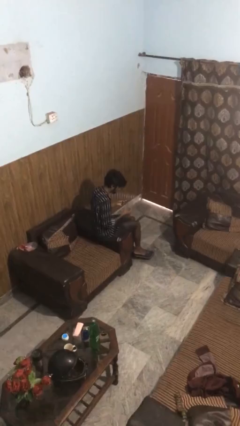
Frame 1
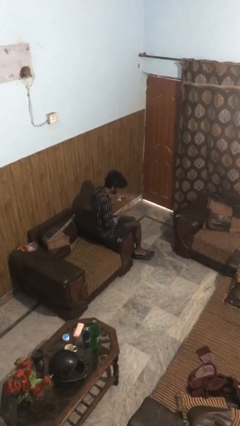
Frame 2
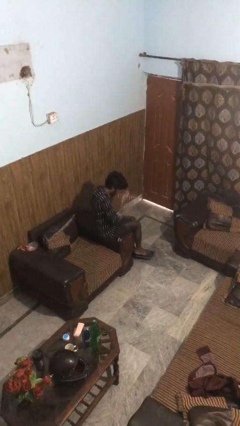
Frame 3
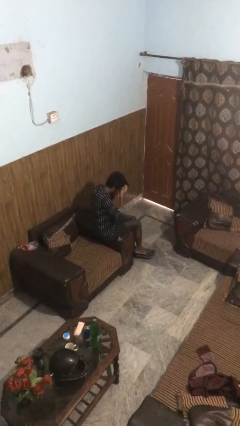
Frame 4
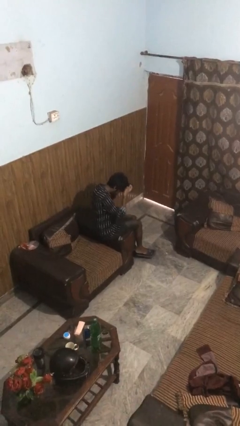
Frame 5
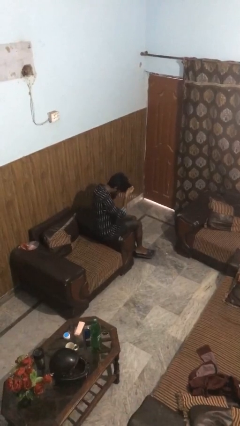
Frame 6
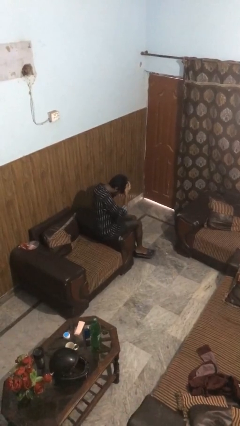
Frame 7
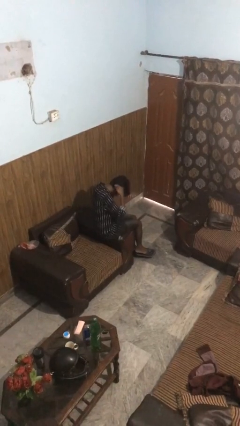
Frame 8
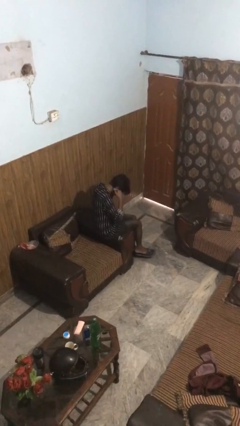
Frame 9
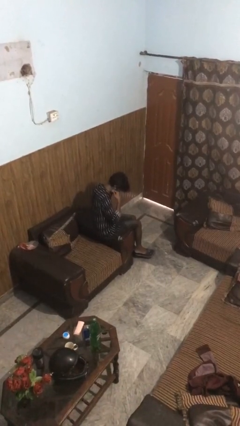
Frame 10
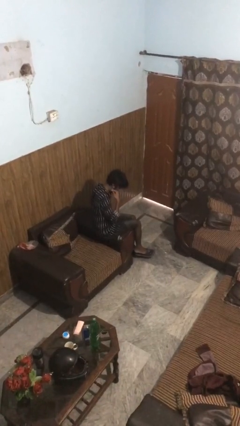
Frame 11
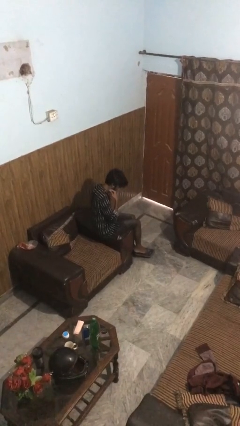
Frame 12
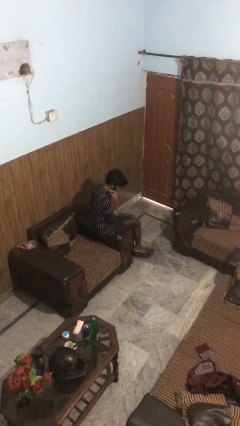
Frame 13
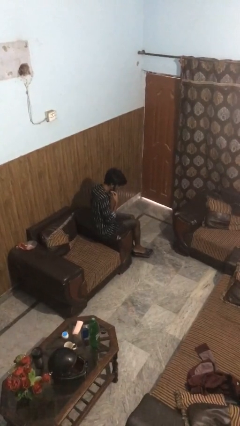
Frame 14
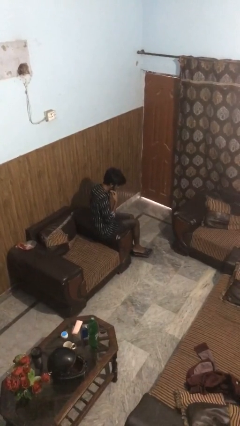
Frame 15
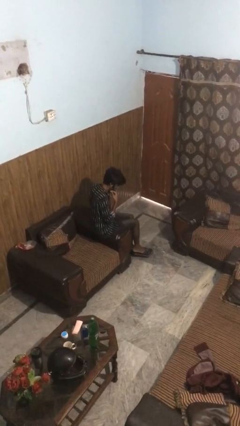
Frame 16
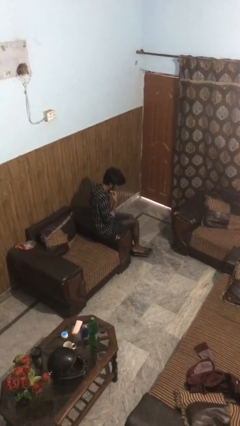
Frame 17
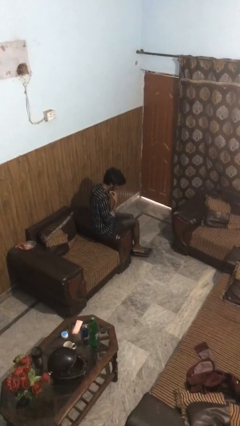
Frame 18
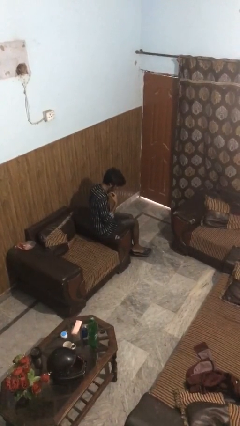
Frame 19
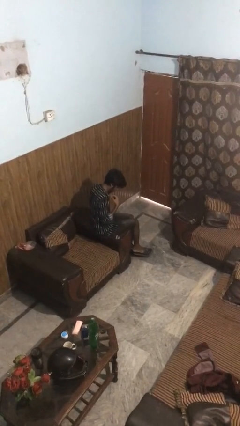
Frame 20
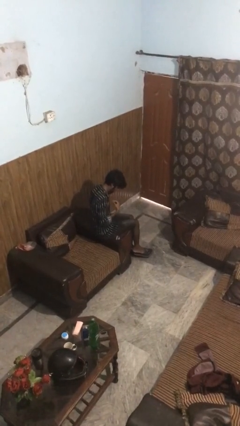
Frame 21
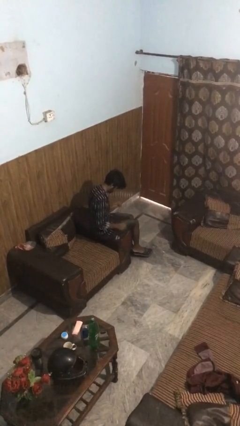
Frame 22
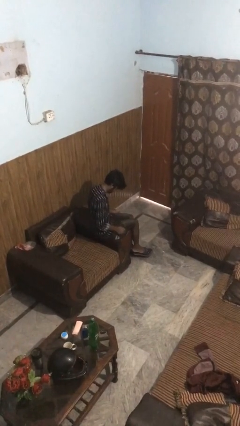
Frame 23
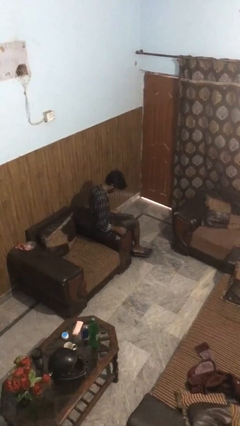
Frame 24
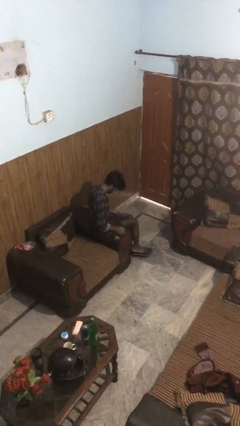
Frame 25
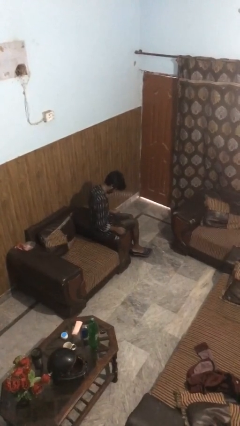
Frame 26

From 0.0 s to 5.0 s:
person puts on necklace

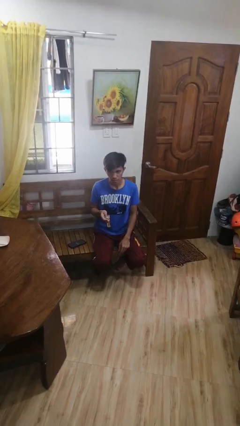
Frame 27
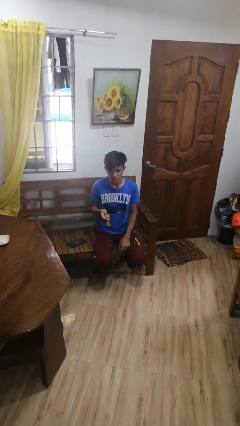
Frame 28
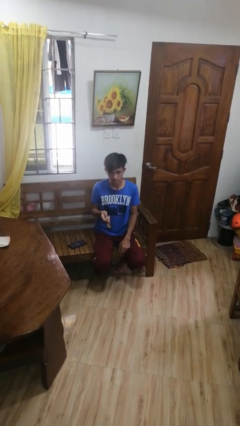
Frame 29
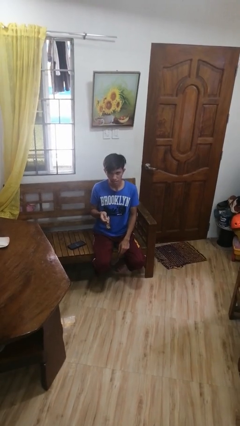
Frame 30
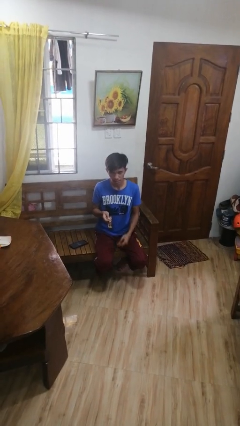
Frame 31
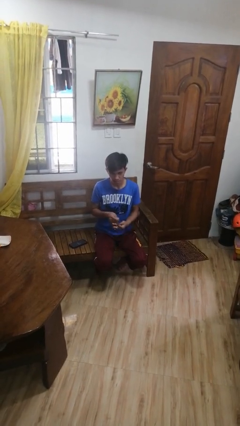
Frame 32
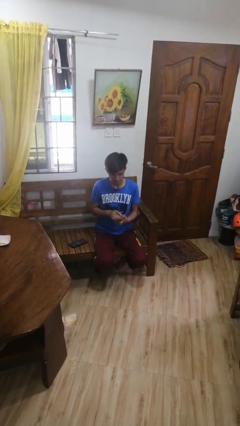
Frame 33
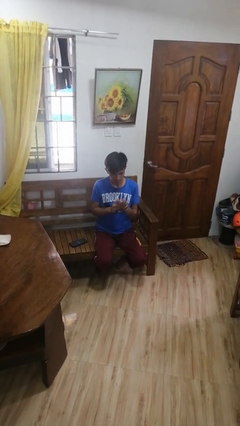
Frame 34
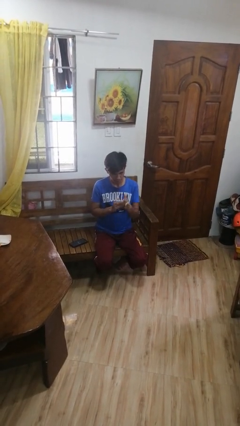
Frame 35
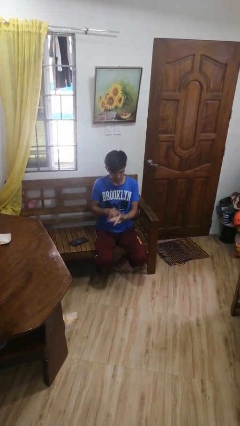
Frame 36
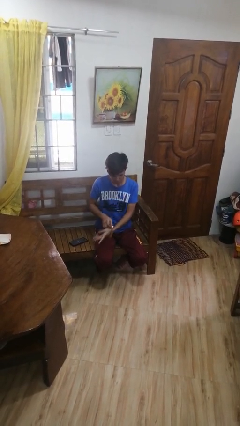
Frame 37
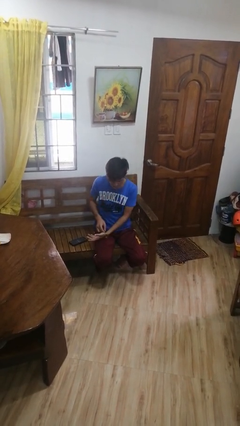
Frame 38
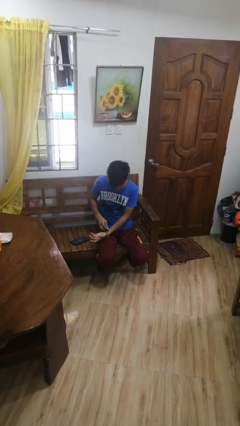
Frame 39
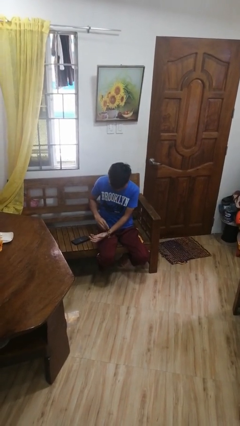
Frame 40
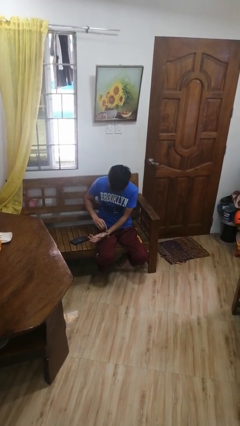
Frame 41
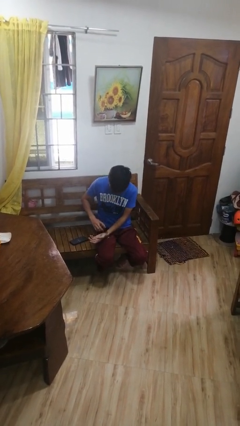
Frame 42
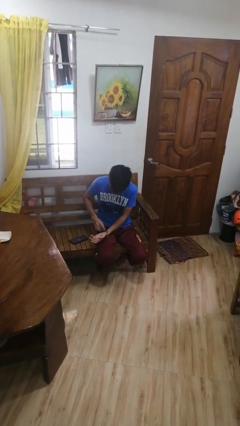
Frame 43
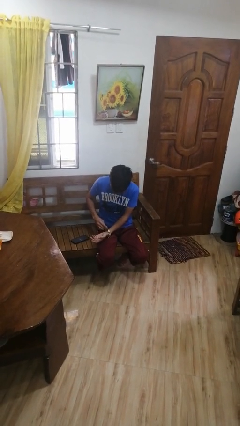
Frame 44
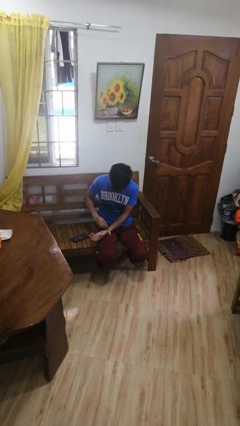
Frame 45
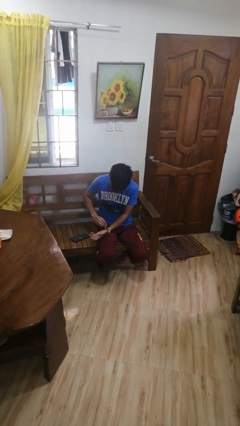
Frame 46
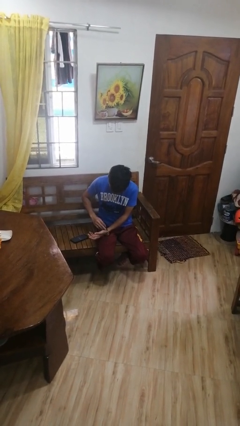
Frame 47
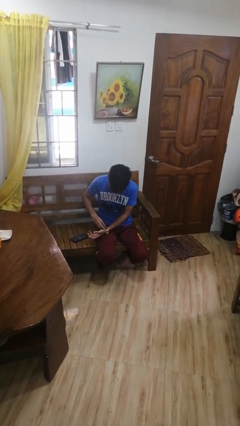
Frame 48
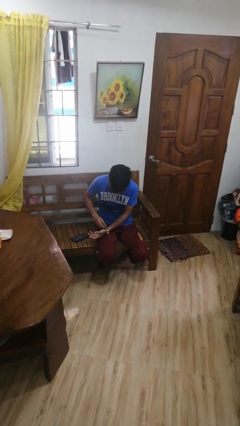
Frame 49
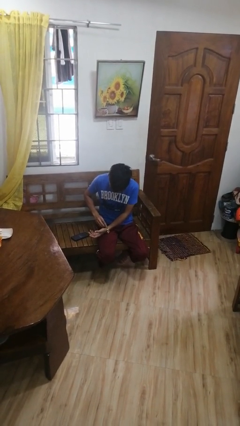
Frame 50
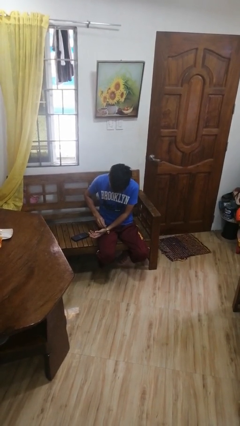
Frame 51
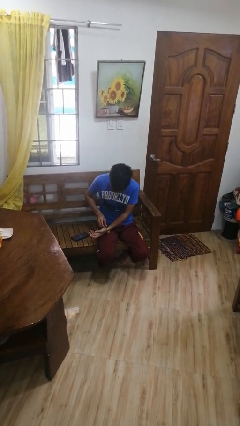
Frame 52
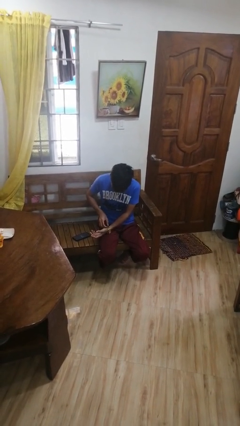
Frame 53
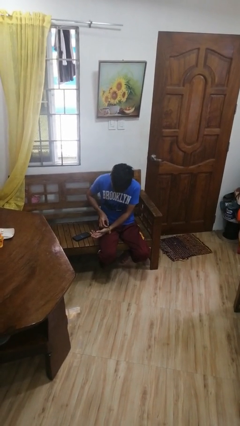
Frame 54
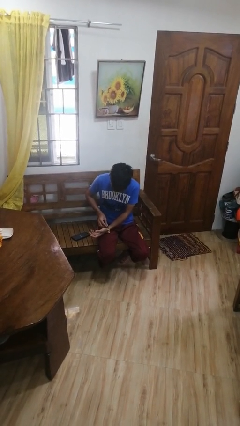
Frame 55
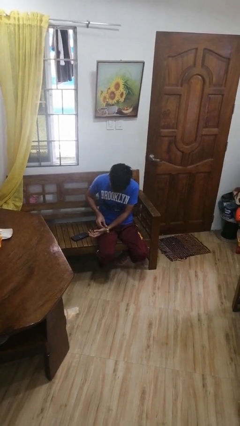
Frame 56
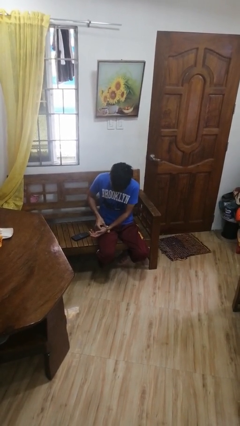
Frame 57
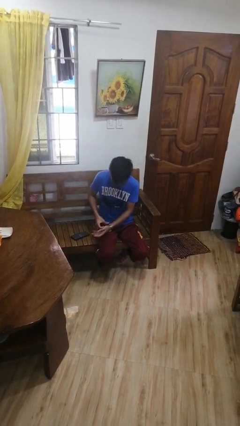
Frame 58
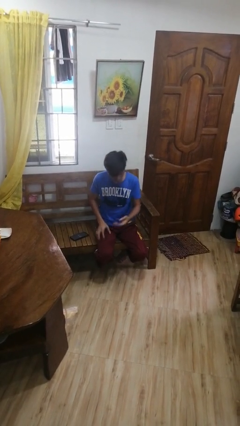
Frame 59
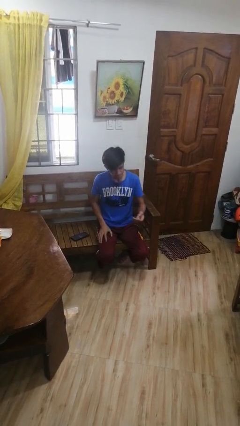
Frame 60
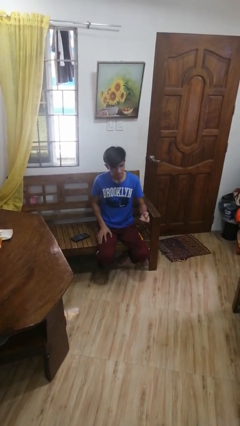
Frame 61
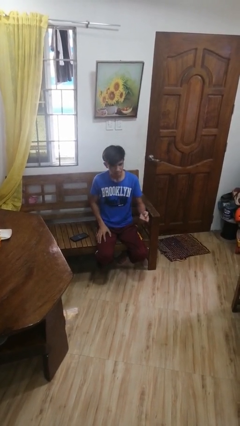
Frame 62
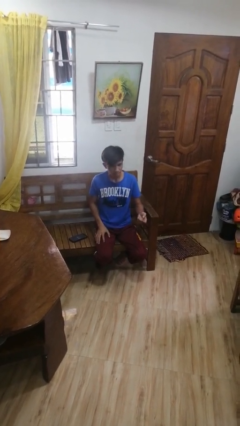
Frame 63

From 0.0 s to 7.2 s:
person puts on wristwatch

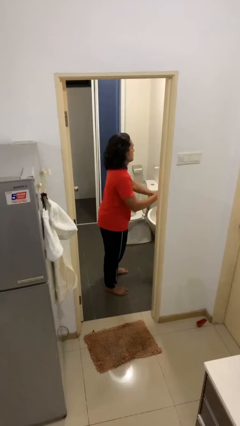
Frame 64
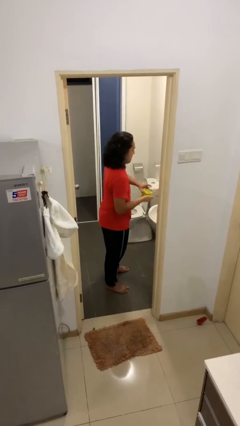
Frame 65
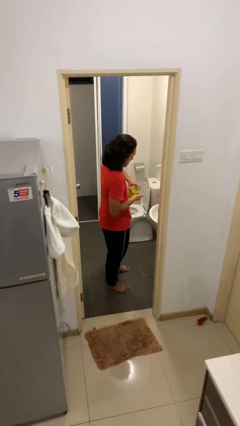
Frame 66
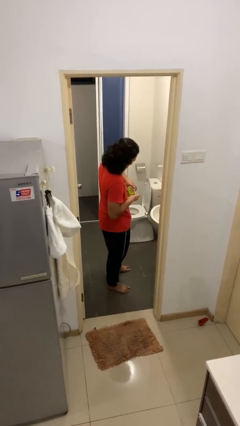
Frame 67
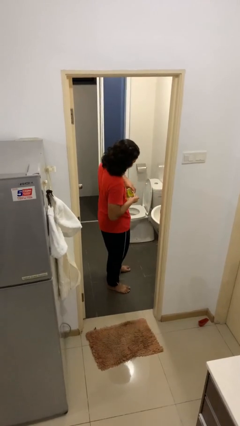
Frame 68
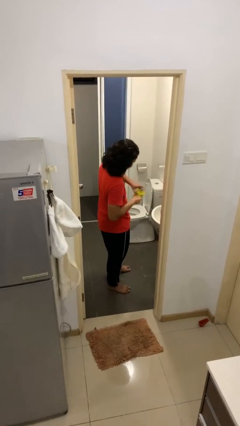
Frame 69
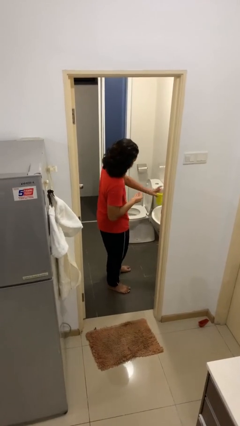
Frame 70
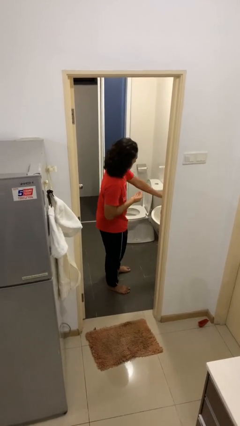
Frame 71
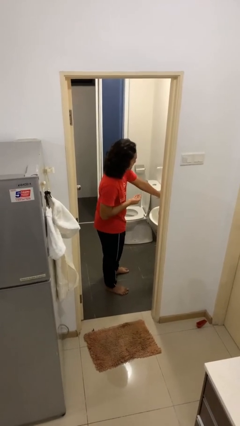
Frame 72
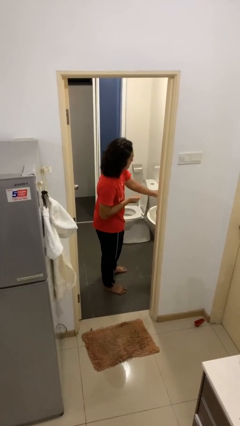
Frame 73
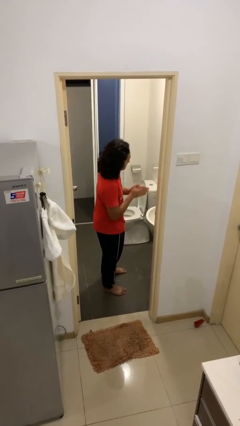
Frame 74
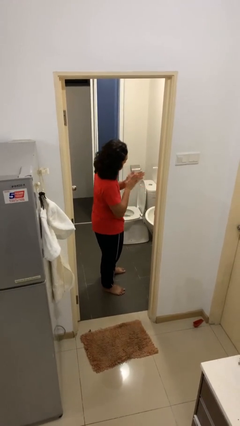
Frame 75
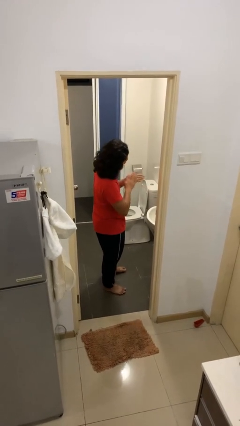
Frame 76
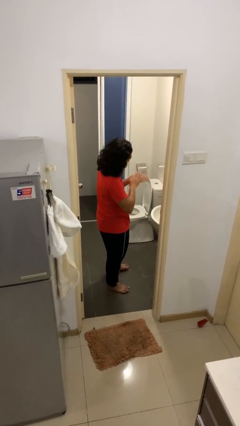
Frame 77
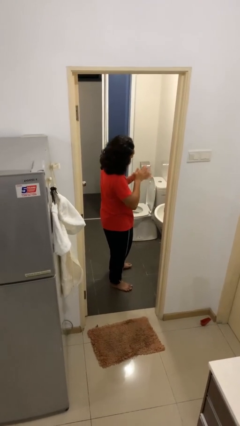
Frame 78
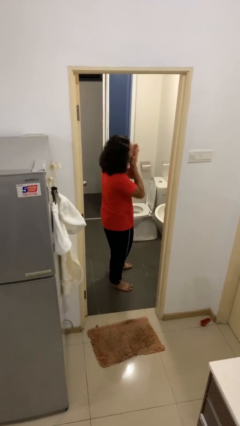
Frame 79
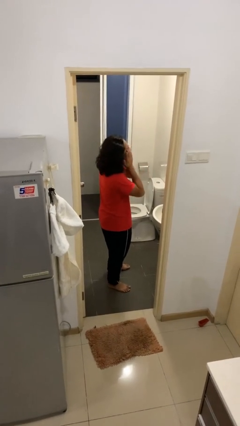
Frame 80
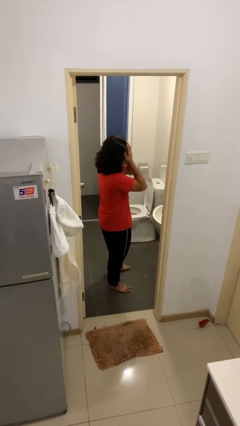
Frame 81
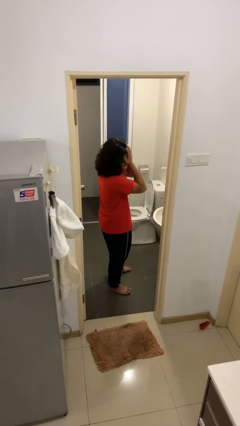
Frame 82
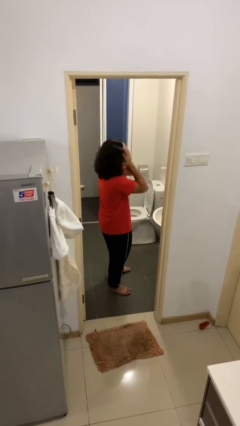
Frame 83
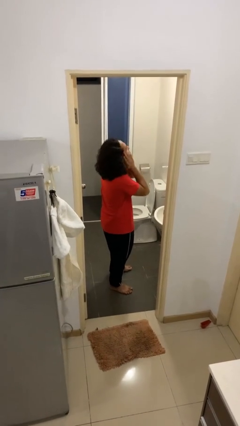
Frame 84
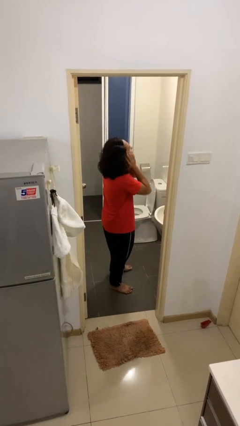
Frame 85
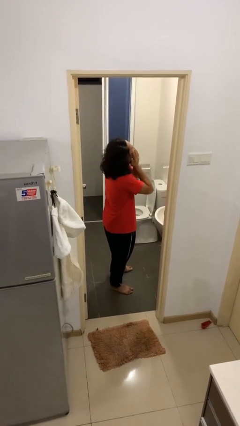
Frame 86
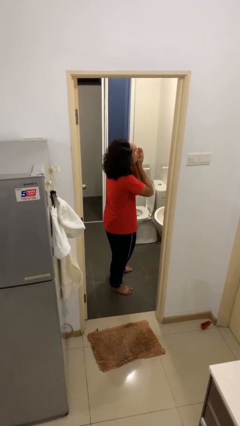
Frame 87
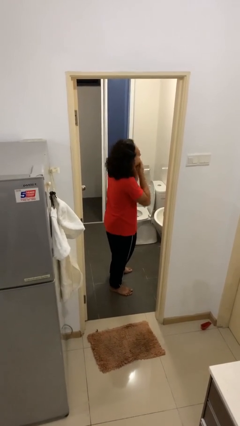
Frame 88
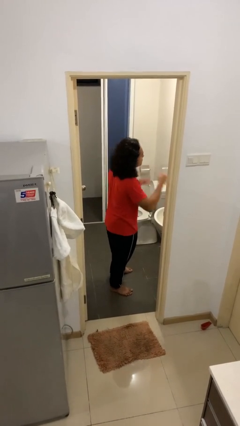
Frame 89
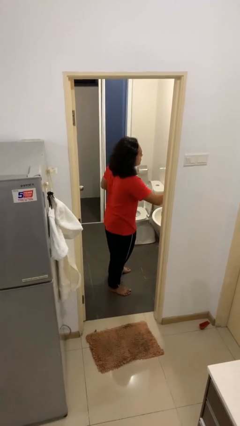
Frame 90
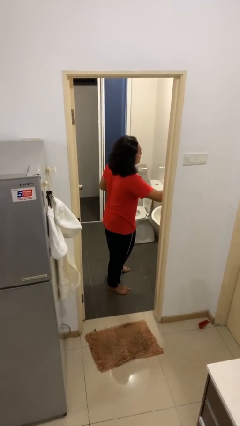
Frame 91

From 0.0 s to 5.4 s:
person applies shaving cream

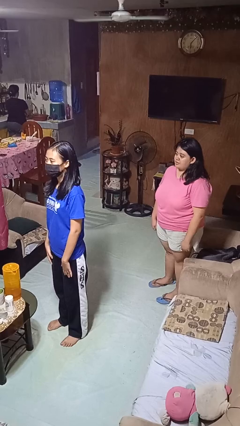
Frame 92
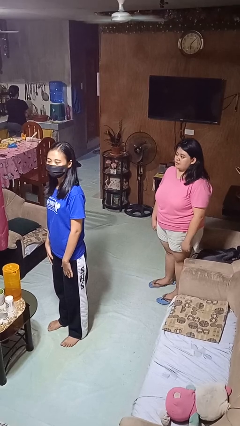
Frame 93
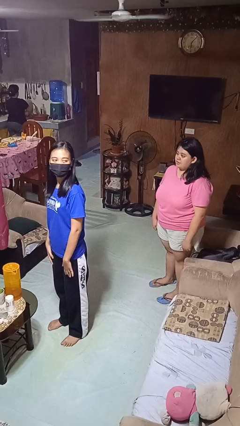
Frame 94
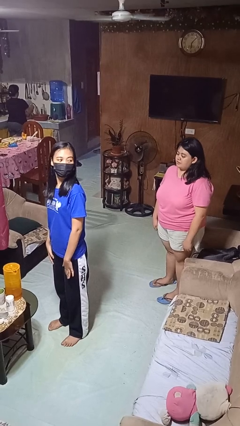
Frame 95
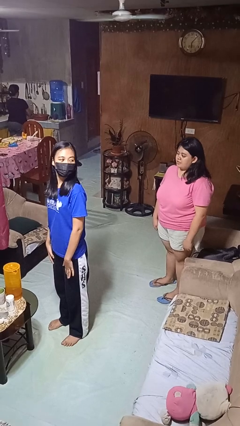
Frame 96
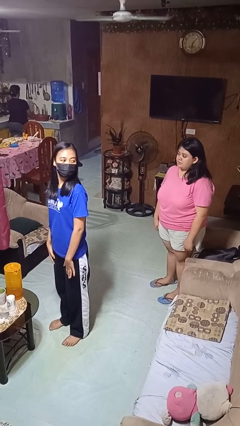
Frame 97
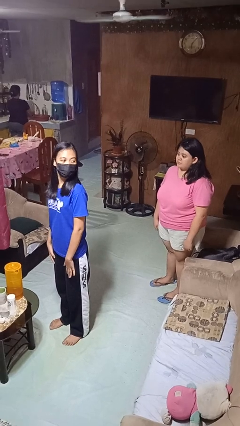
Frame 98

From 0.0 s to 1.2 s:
person looks over shoulder
